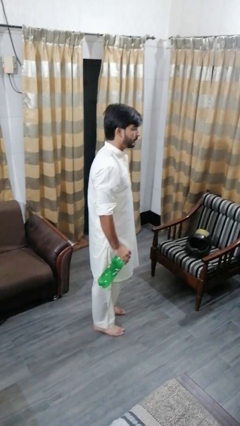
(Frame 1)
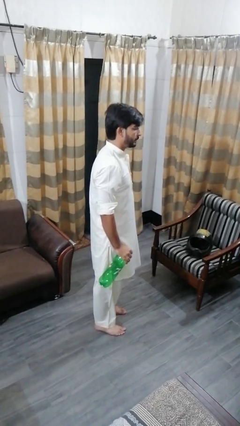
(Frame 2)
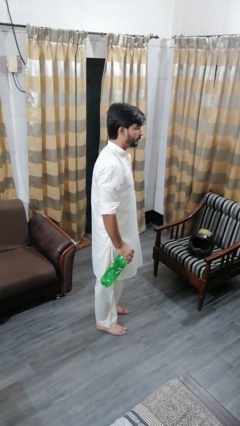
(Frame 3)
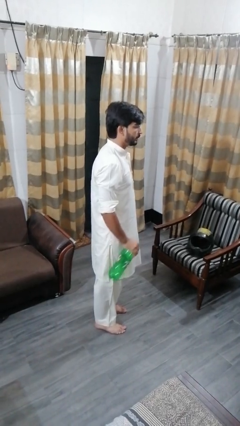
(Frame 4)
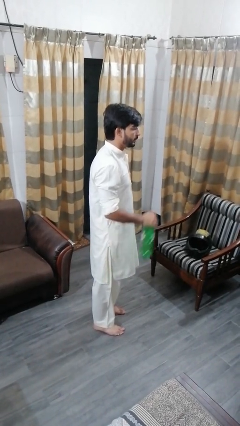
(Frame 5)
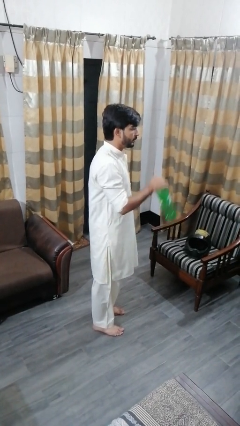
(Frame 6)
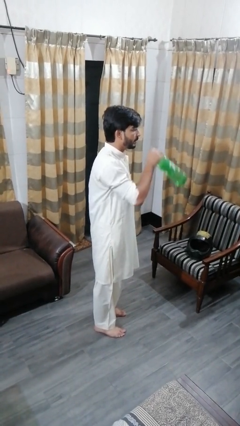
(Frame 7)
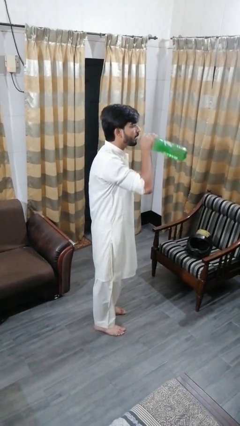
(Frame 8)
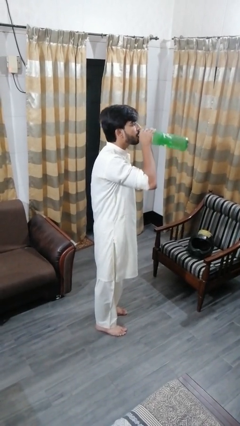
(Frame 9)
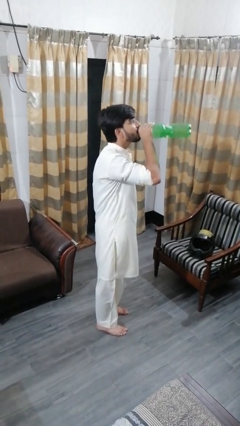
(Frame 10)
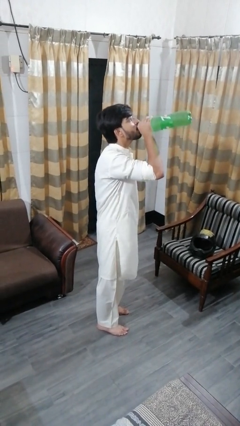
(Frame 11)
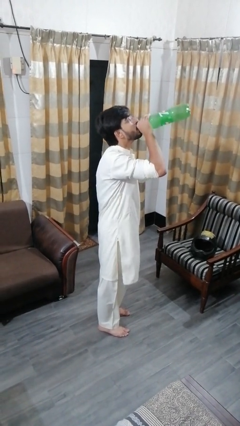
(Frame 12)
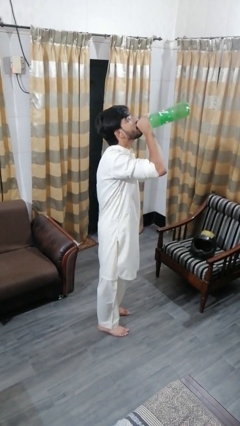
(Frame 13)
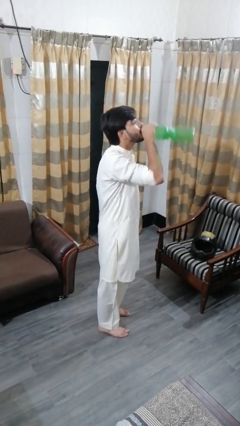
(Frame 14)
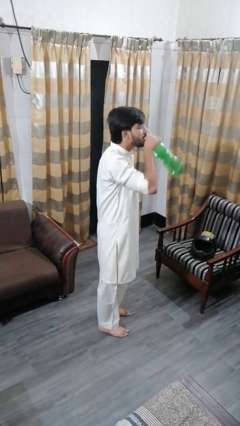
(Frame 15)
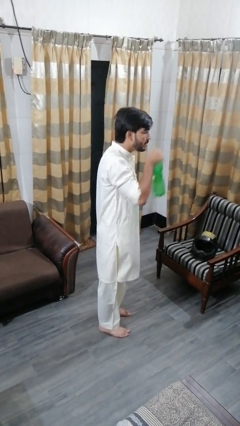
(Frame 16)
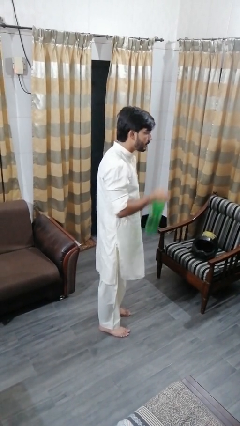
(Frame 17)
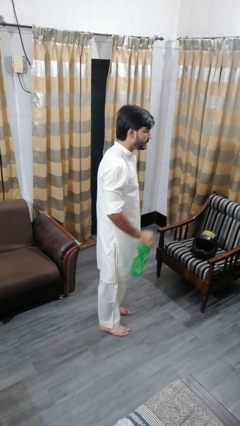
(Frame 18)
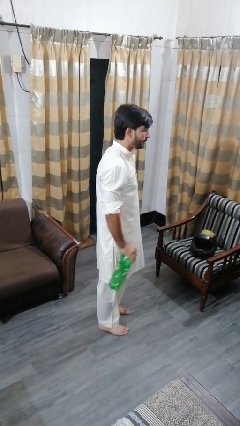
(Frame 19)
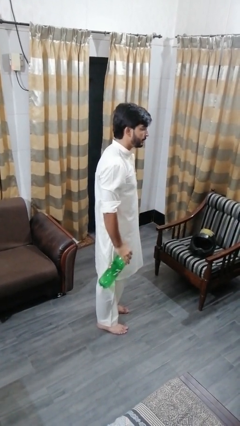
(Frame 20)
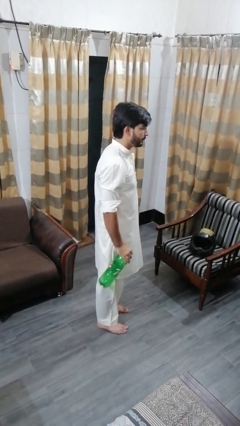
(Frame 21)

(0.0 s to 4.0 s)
person drinks from bottle

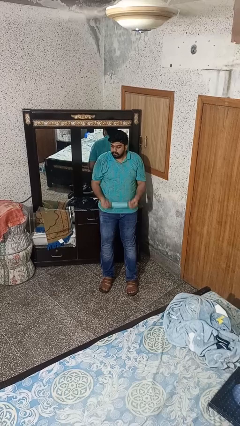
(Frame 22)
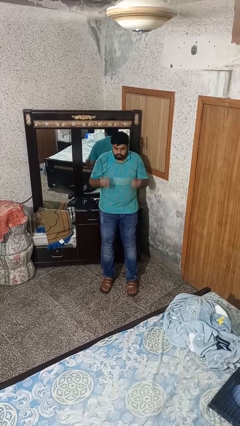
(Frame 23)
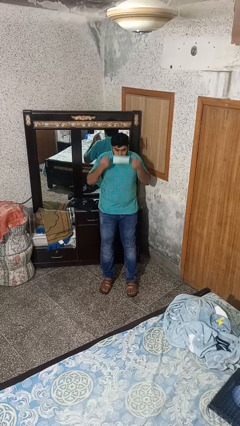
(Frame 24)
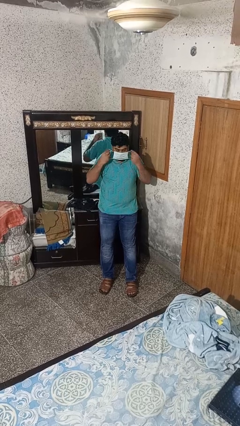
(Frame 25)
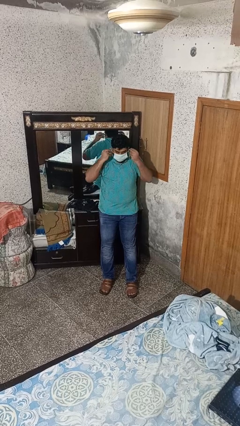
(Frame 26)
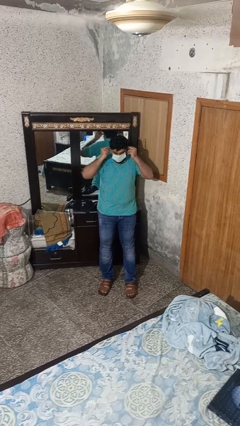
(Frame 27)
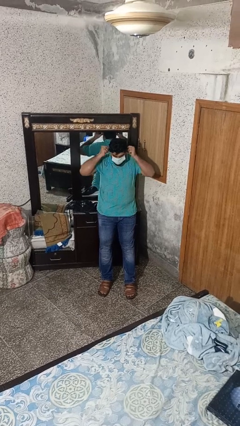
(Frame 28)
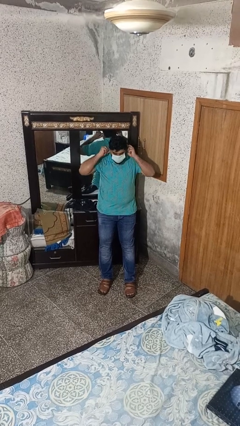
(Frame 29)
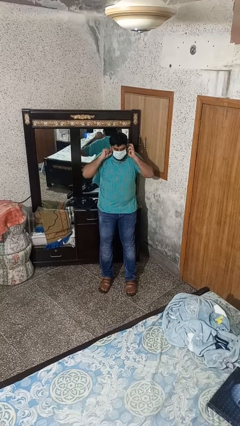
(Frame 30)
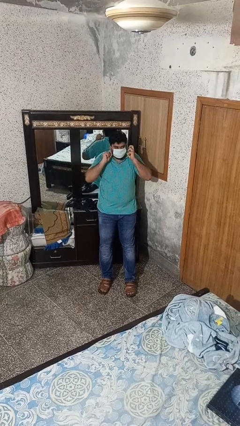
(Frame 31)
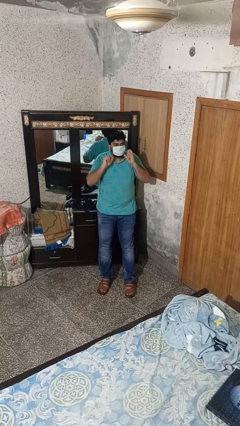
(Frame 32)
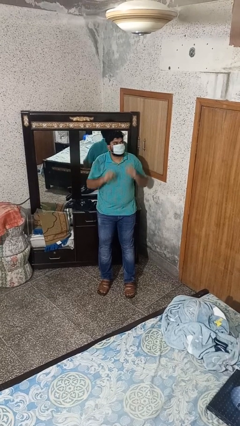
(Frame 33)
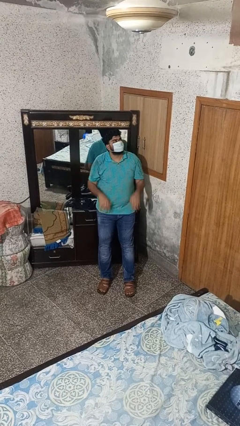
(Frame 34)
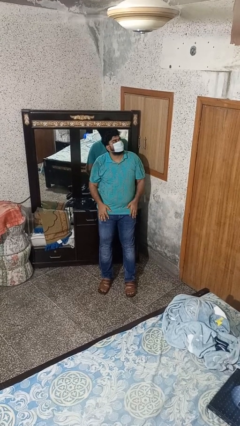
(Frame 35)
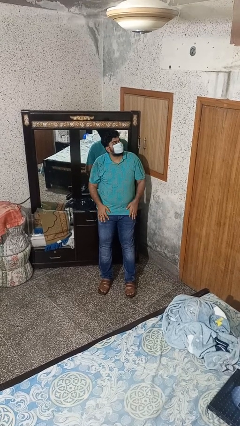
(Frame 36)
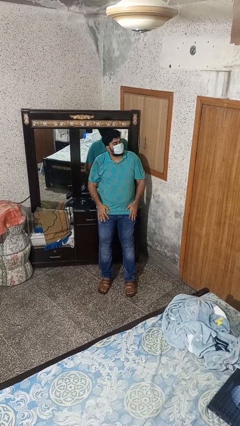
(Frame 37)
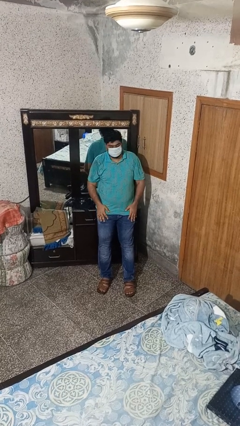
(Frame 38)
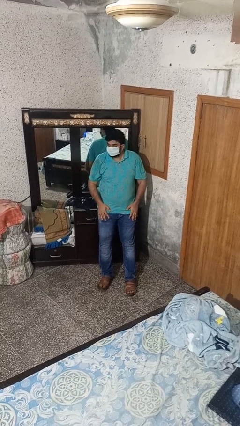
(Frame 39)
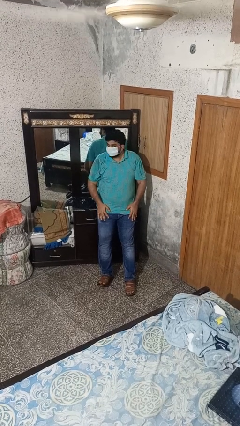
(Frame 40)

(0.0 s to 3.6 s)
person puts on facemask

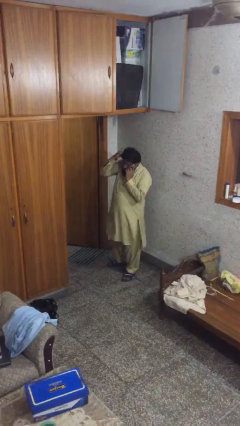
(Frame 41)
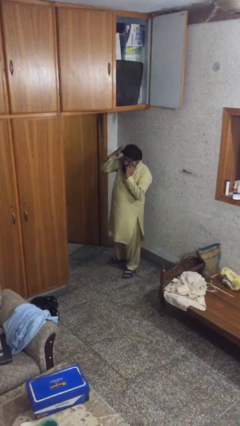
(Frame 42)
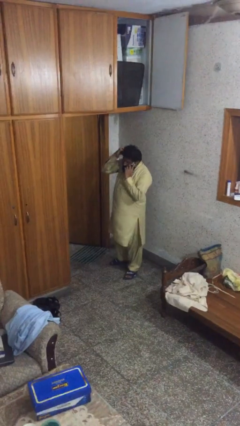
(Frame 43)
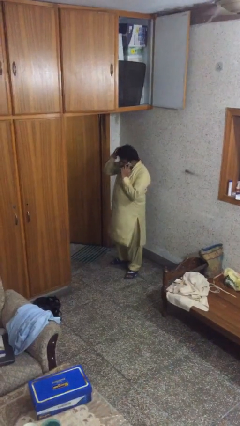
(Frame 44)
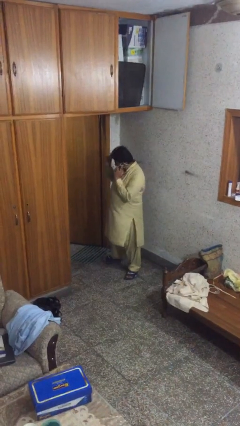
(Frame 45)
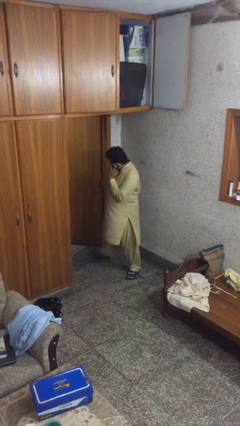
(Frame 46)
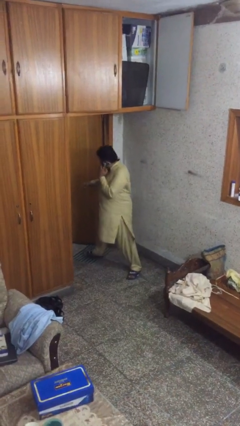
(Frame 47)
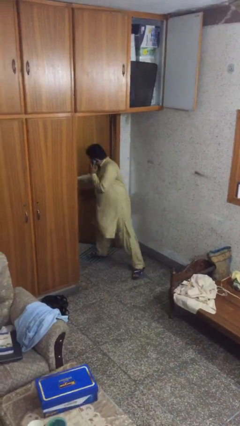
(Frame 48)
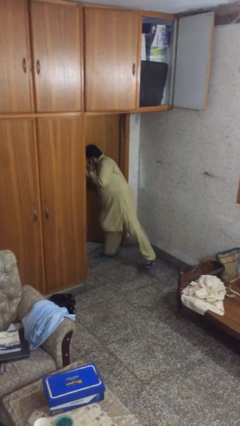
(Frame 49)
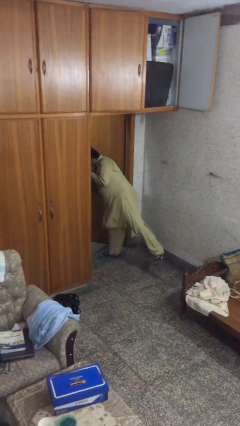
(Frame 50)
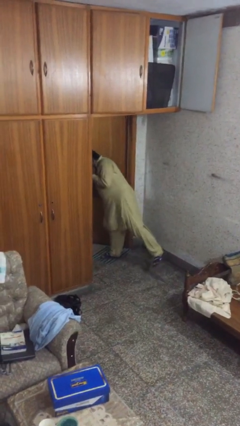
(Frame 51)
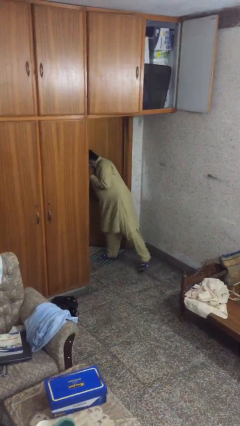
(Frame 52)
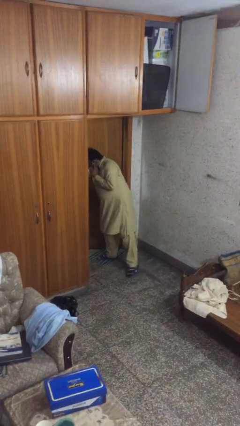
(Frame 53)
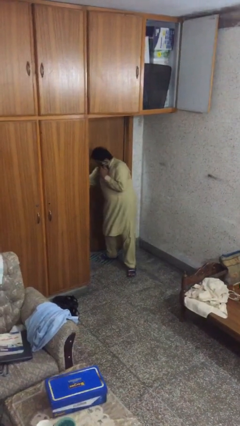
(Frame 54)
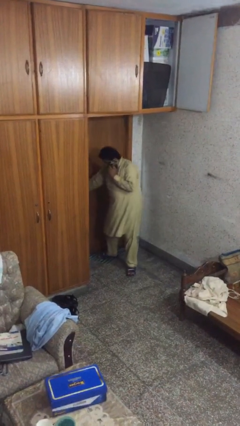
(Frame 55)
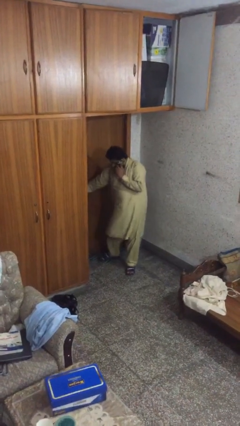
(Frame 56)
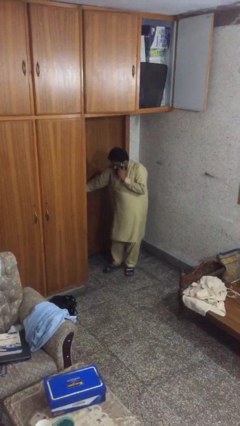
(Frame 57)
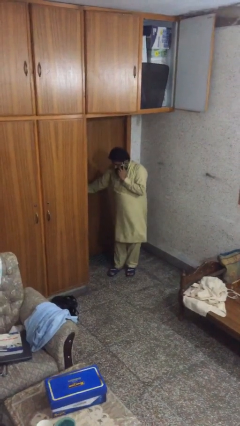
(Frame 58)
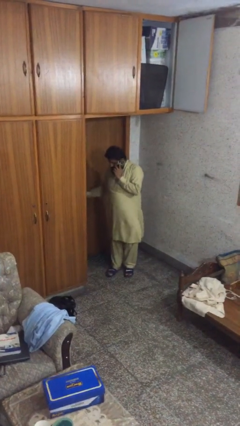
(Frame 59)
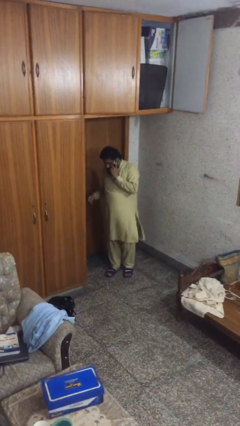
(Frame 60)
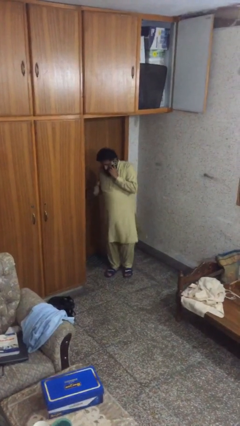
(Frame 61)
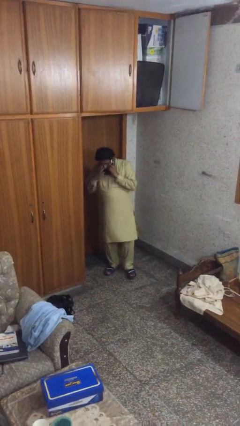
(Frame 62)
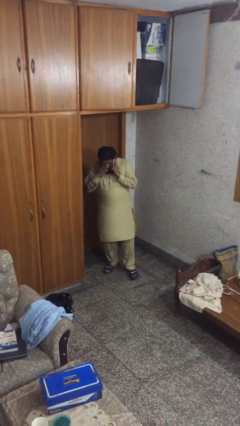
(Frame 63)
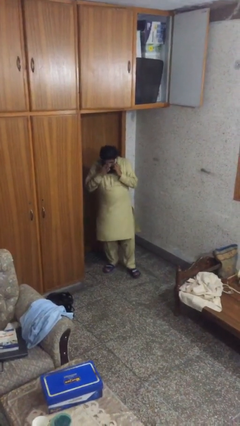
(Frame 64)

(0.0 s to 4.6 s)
person closes facility door

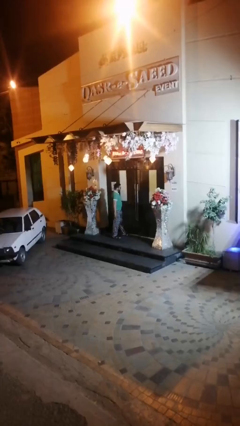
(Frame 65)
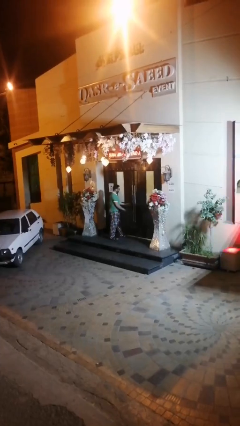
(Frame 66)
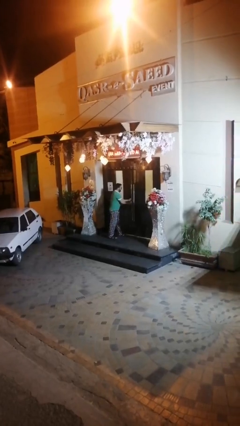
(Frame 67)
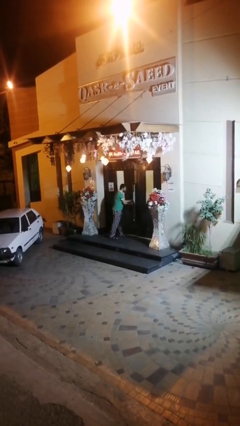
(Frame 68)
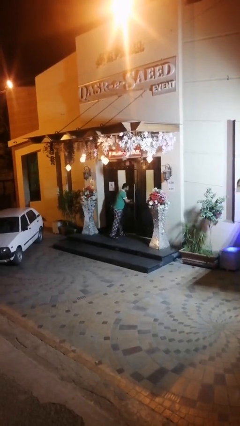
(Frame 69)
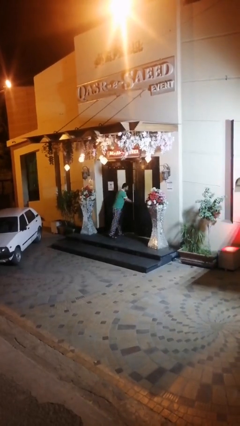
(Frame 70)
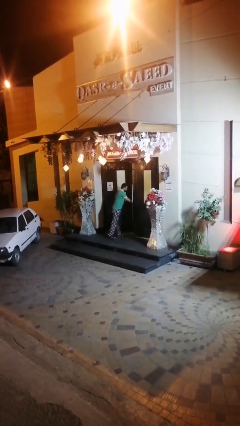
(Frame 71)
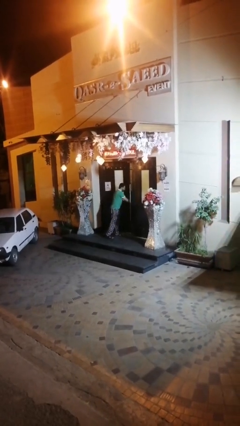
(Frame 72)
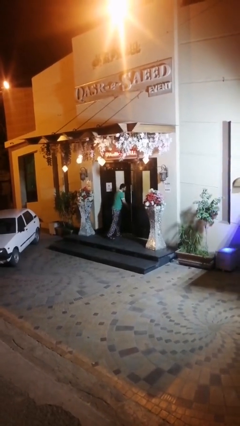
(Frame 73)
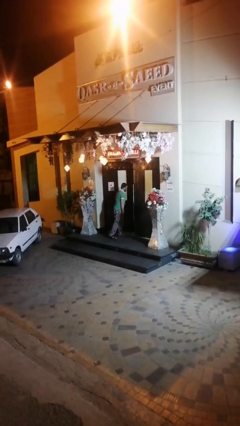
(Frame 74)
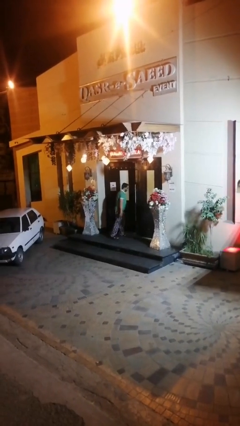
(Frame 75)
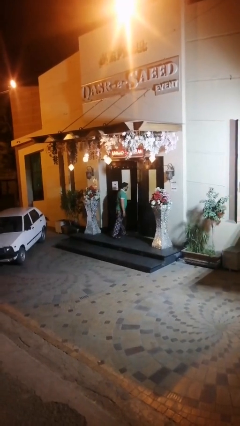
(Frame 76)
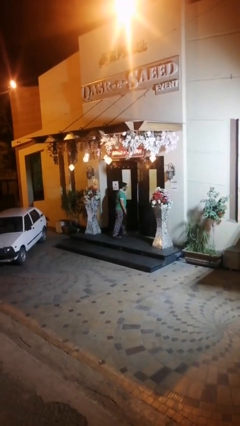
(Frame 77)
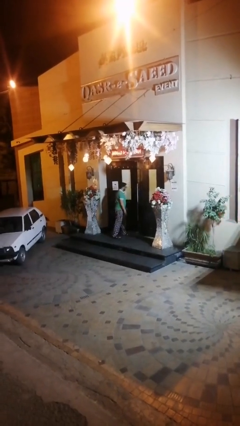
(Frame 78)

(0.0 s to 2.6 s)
person opens facility door

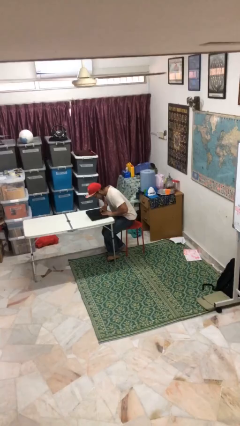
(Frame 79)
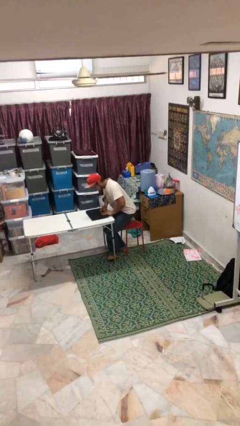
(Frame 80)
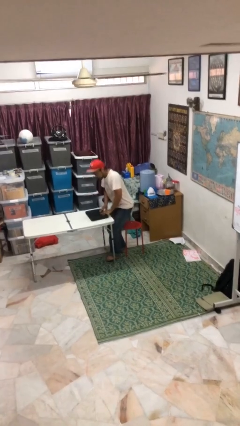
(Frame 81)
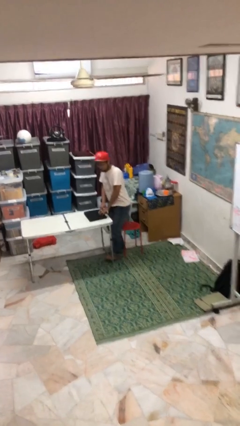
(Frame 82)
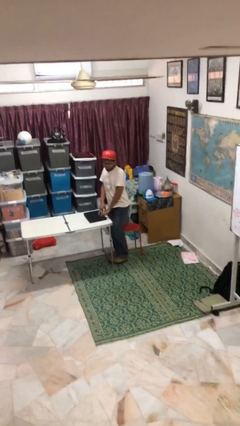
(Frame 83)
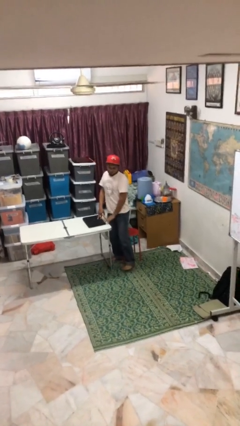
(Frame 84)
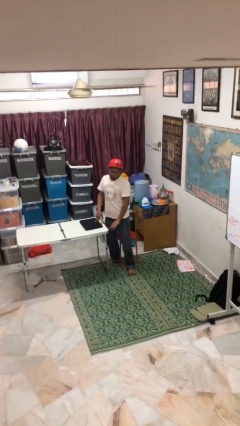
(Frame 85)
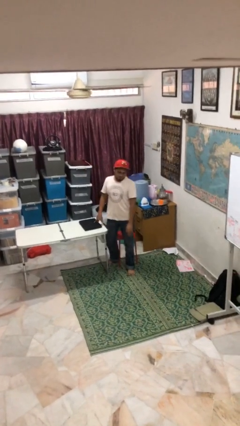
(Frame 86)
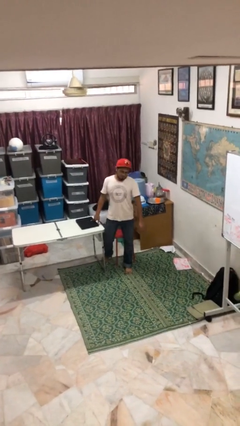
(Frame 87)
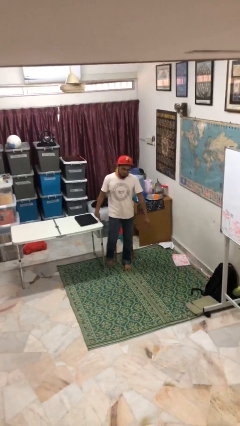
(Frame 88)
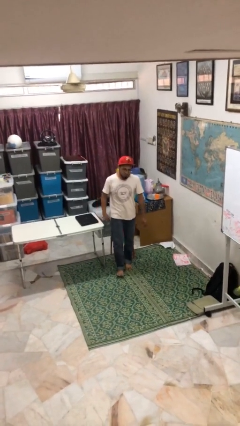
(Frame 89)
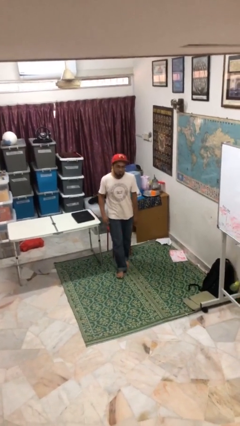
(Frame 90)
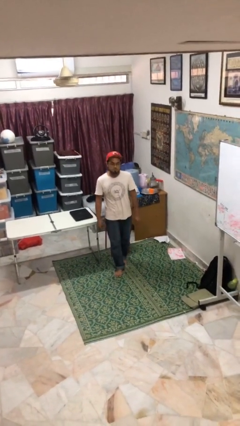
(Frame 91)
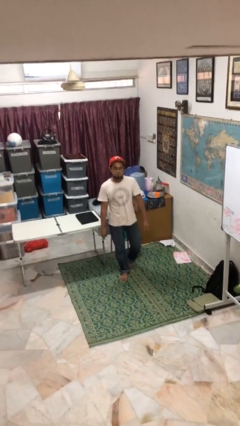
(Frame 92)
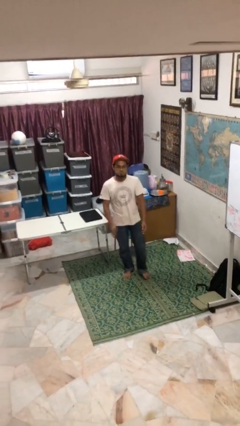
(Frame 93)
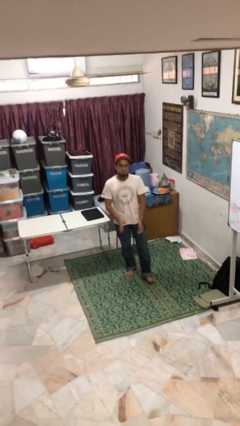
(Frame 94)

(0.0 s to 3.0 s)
person stands up
